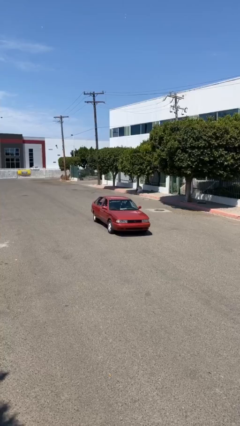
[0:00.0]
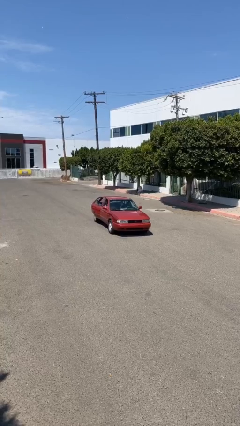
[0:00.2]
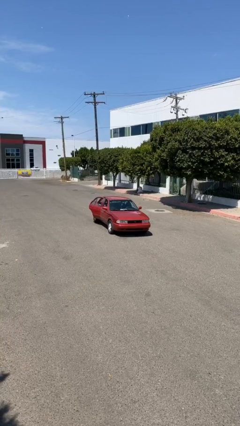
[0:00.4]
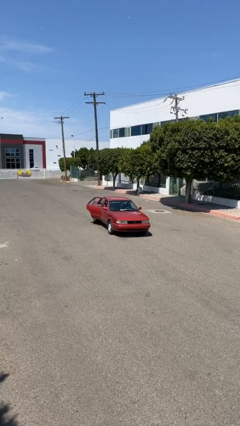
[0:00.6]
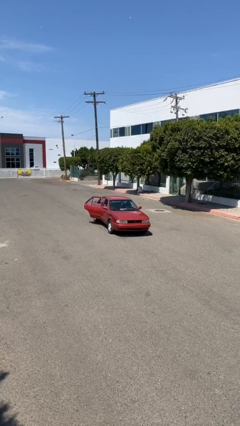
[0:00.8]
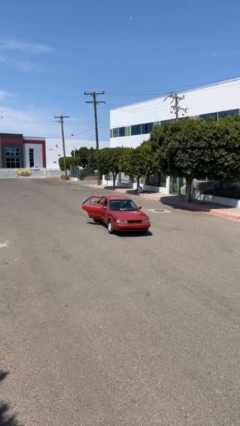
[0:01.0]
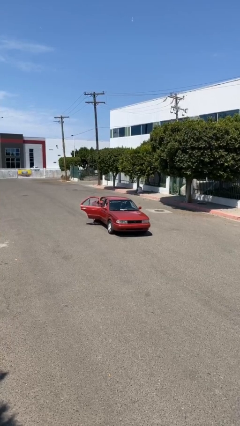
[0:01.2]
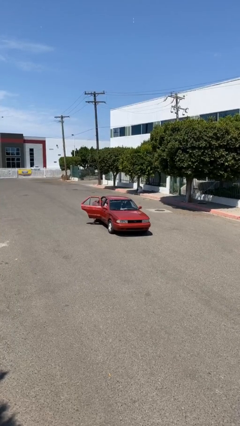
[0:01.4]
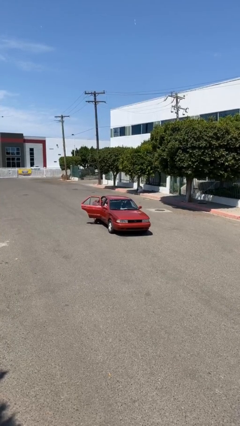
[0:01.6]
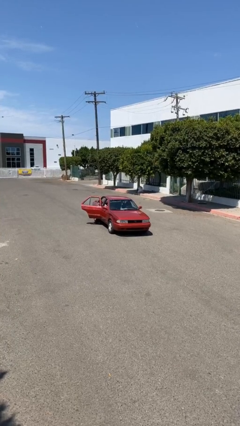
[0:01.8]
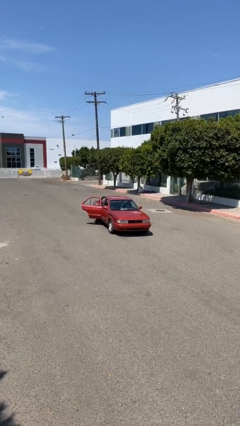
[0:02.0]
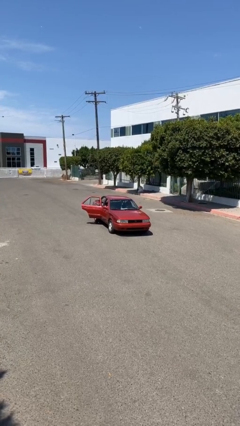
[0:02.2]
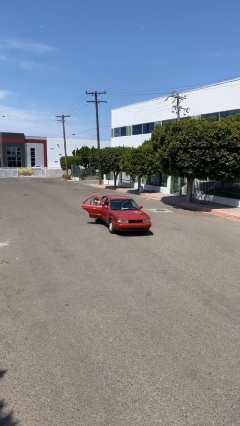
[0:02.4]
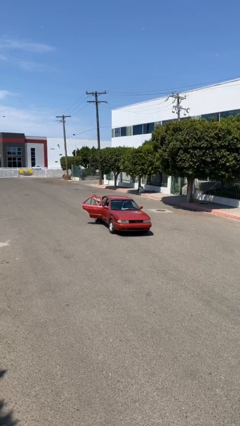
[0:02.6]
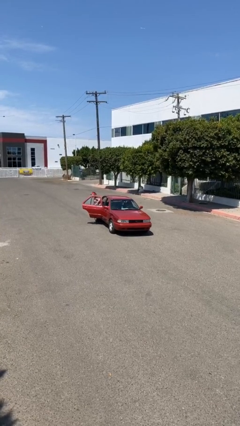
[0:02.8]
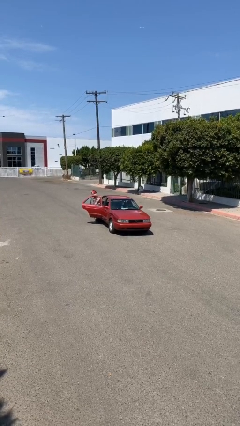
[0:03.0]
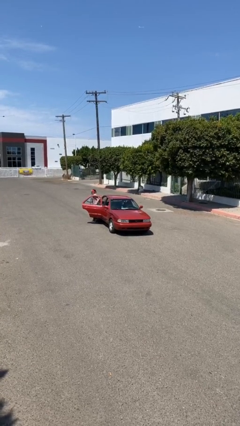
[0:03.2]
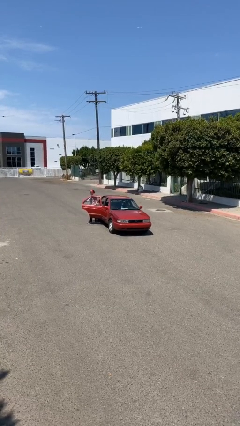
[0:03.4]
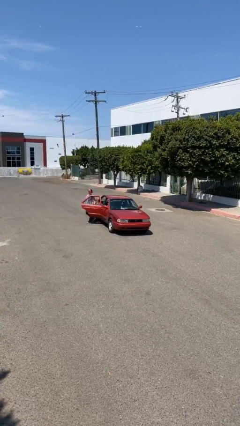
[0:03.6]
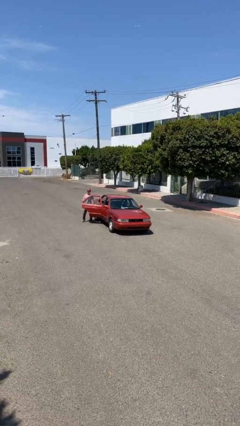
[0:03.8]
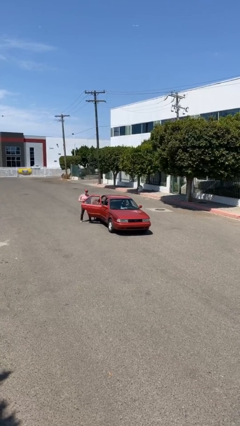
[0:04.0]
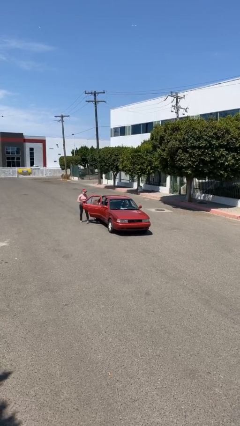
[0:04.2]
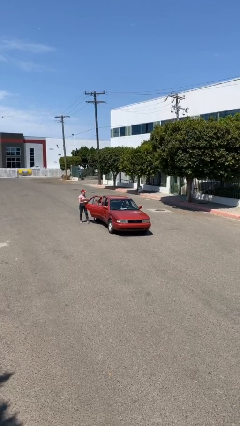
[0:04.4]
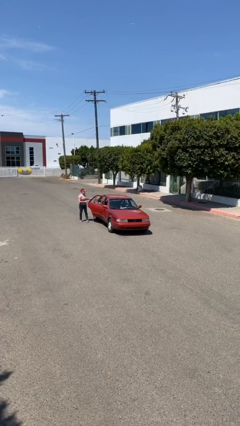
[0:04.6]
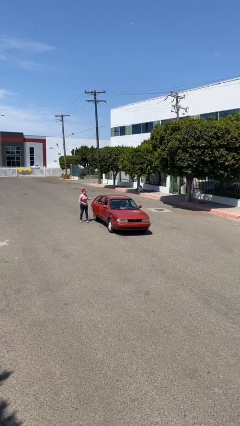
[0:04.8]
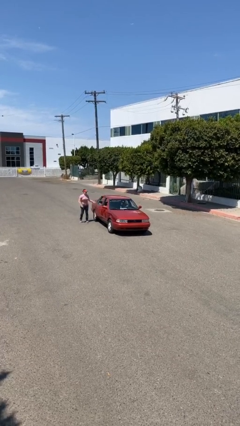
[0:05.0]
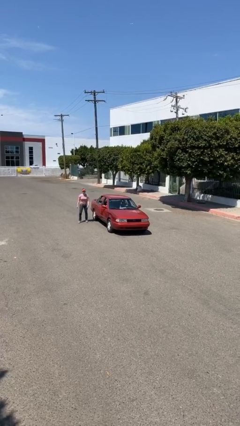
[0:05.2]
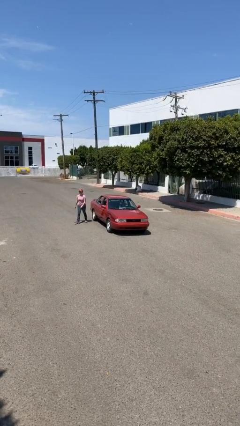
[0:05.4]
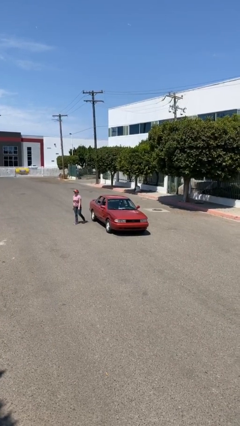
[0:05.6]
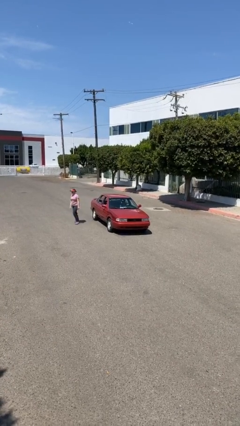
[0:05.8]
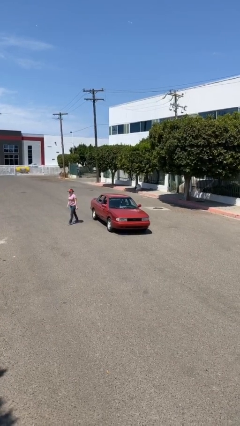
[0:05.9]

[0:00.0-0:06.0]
car drops off person

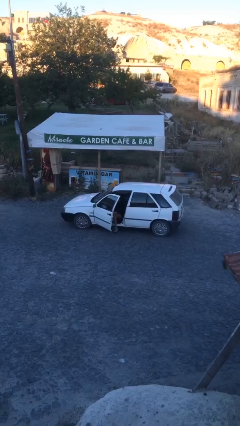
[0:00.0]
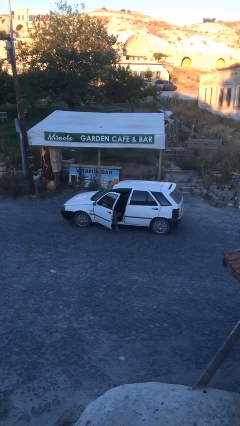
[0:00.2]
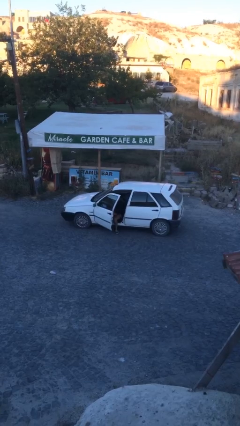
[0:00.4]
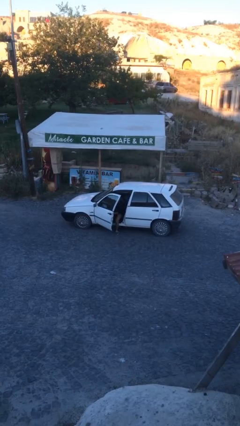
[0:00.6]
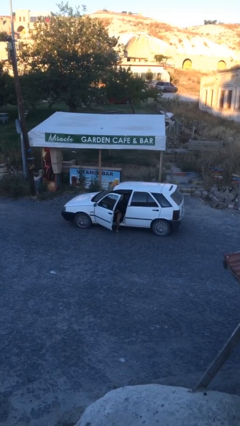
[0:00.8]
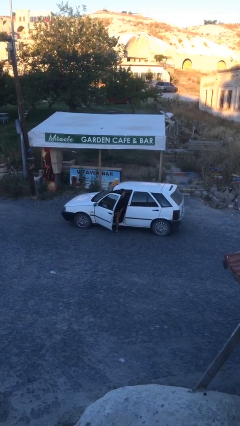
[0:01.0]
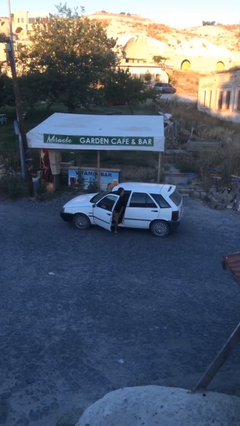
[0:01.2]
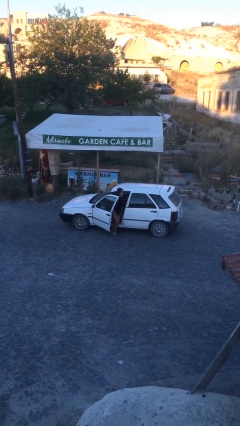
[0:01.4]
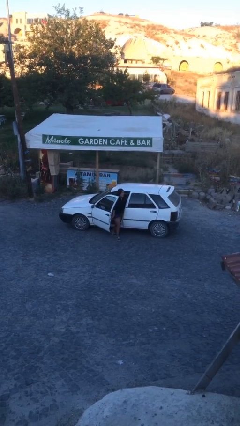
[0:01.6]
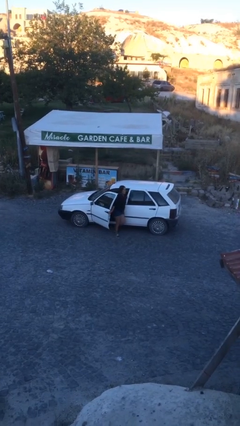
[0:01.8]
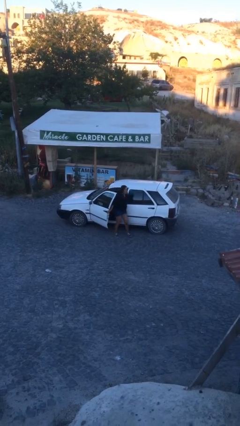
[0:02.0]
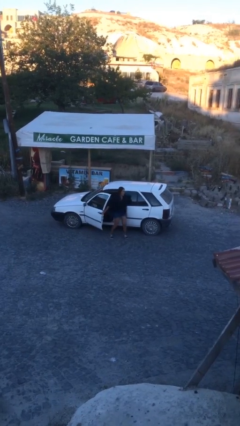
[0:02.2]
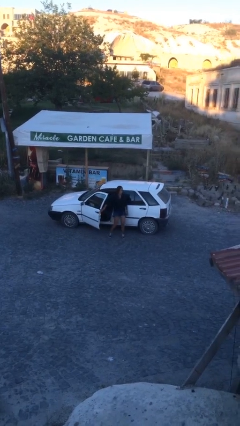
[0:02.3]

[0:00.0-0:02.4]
person exits car

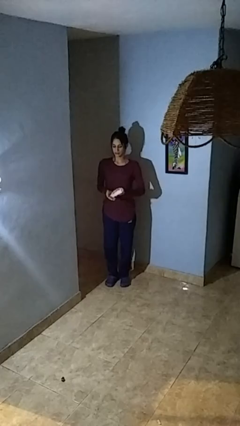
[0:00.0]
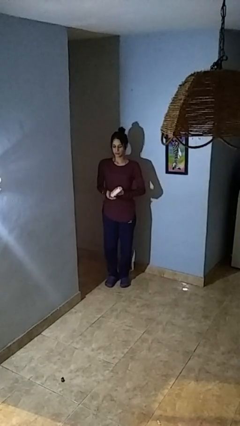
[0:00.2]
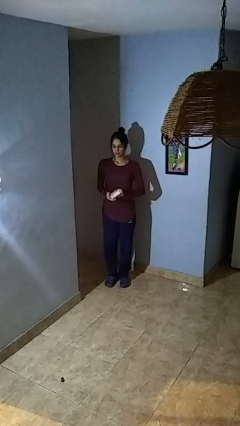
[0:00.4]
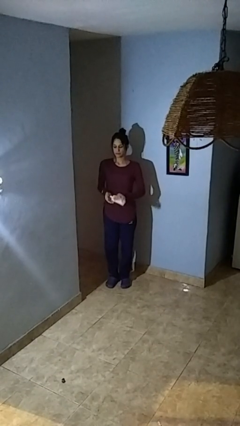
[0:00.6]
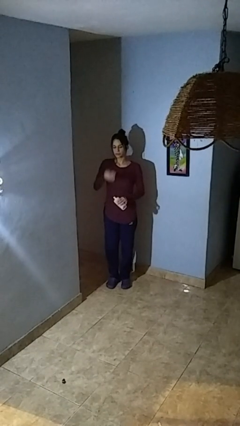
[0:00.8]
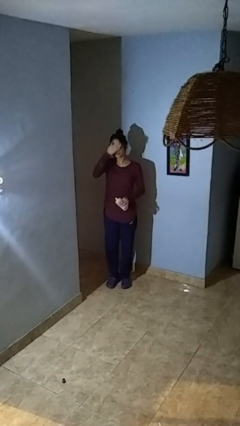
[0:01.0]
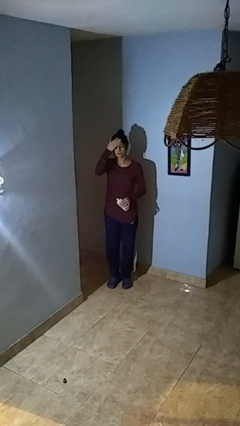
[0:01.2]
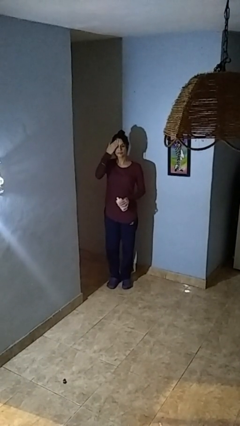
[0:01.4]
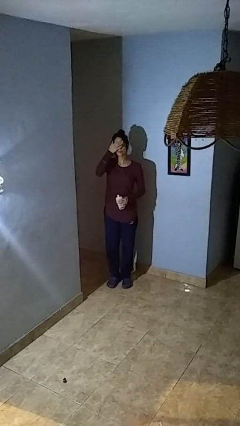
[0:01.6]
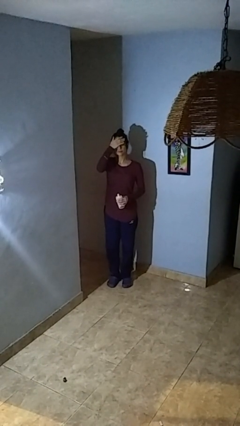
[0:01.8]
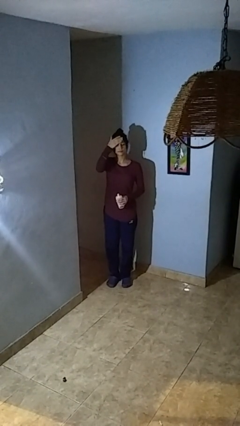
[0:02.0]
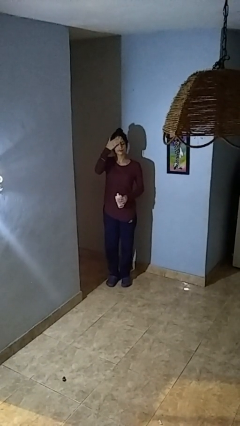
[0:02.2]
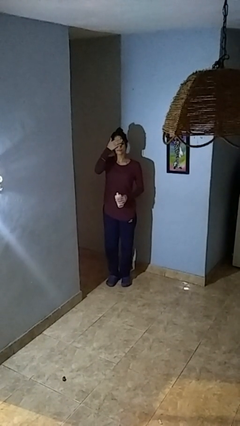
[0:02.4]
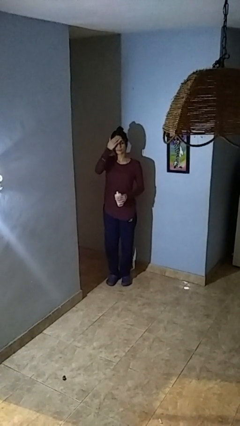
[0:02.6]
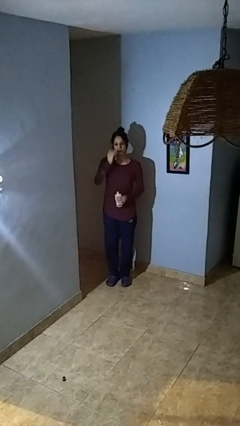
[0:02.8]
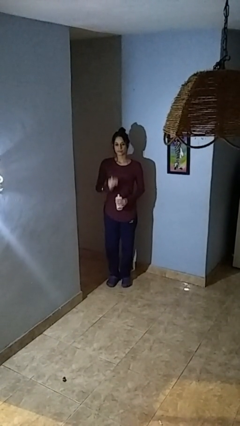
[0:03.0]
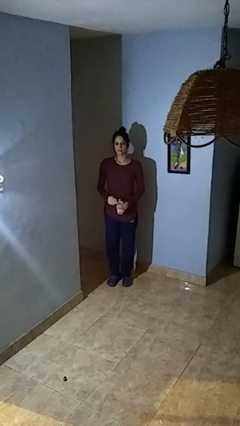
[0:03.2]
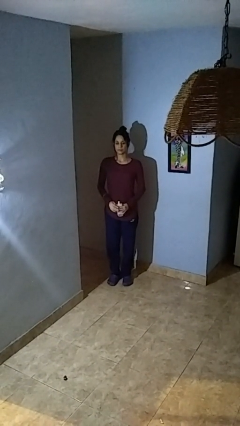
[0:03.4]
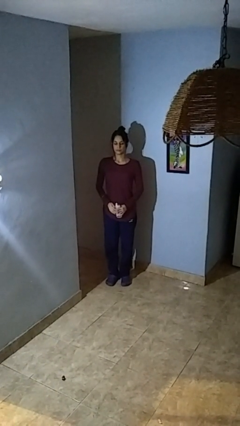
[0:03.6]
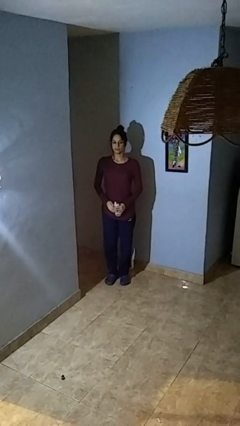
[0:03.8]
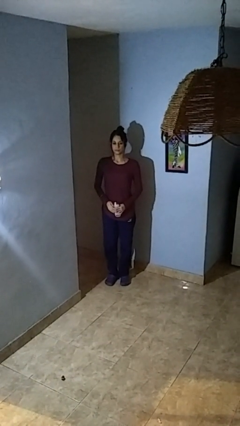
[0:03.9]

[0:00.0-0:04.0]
person applies facial moisturizer

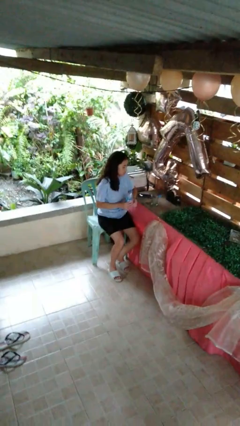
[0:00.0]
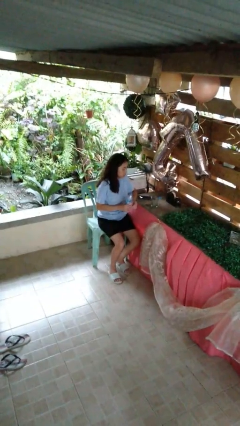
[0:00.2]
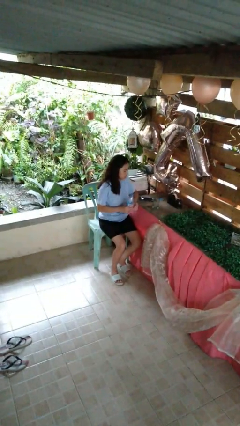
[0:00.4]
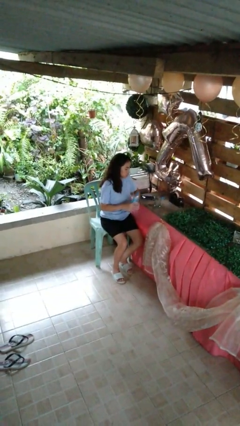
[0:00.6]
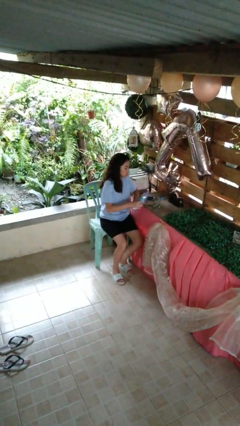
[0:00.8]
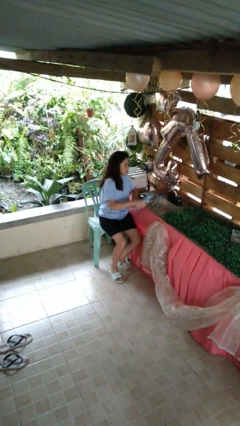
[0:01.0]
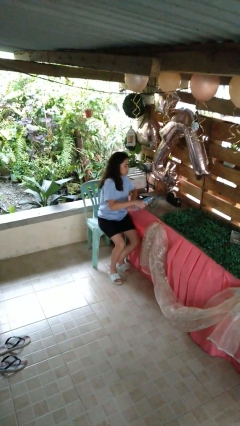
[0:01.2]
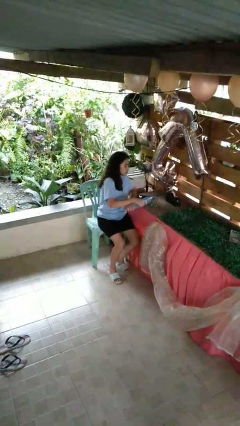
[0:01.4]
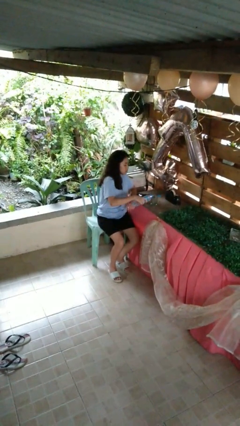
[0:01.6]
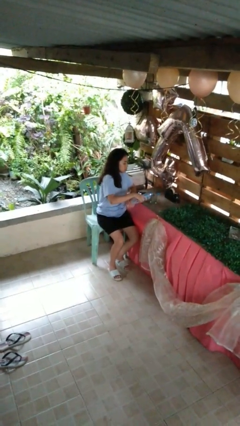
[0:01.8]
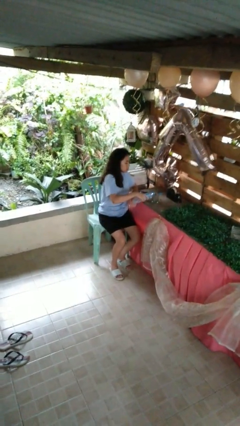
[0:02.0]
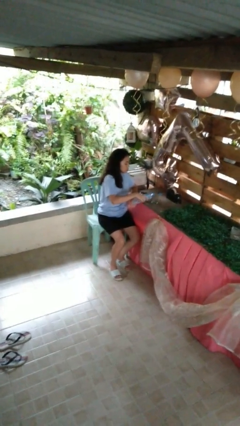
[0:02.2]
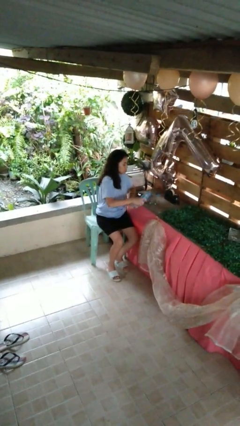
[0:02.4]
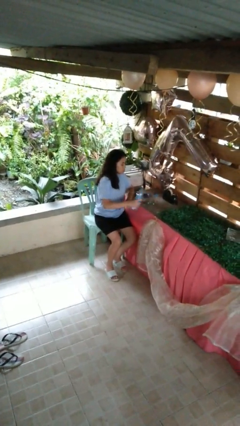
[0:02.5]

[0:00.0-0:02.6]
person pours liquid into cup

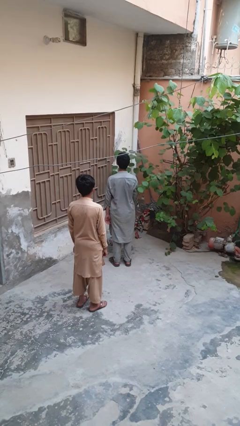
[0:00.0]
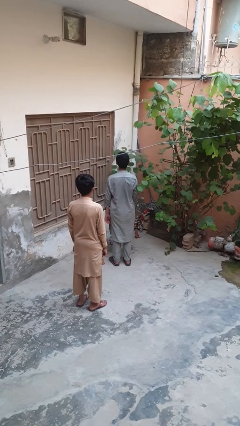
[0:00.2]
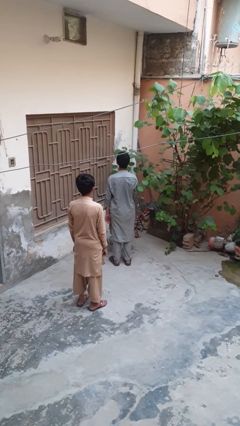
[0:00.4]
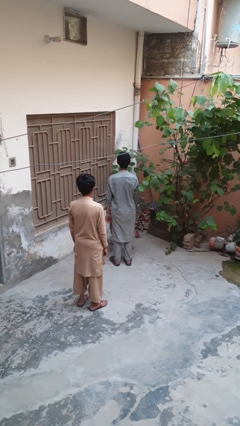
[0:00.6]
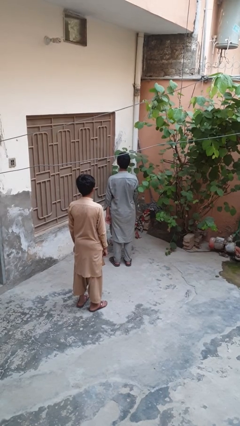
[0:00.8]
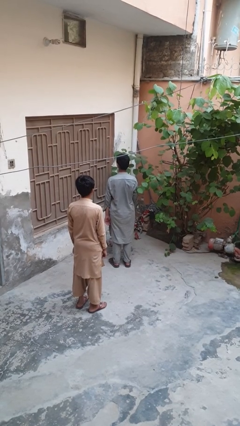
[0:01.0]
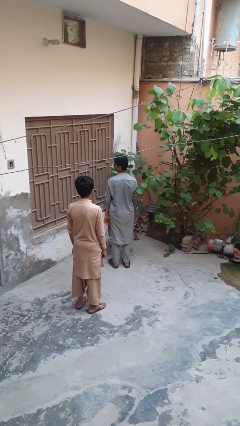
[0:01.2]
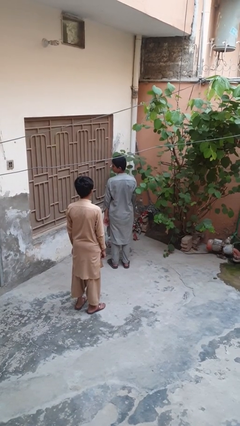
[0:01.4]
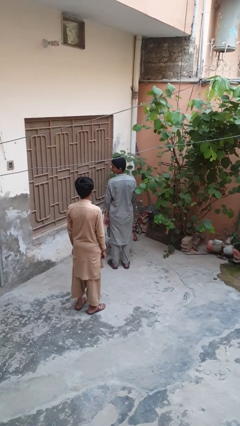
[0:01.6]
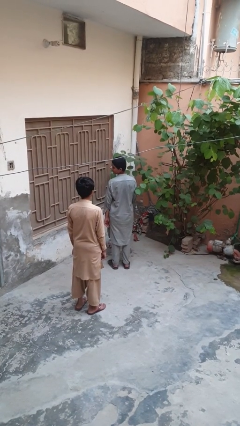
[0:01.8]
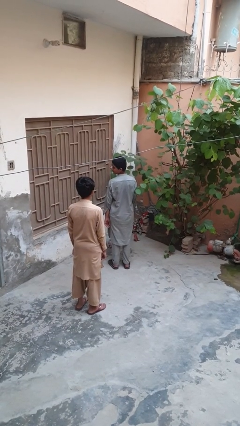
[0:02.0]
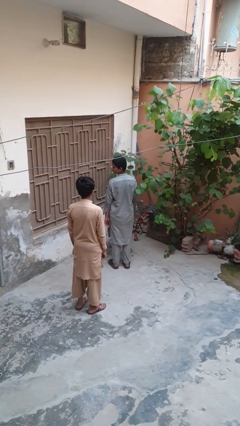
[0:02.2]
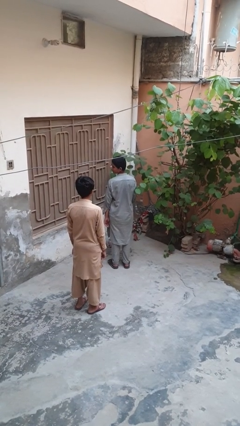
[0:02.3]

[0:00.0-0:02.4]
person looks over shoulder

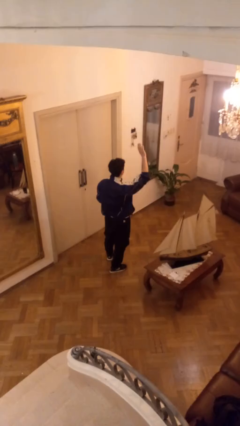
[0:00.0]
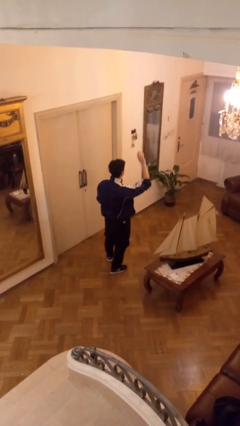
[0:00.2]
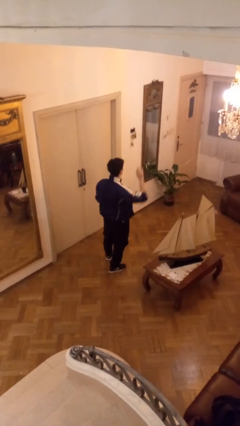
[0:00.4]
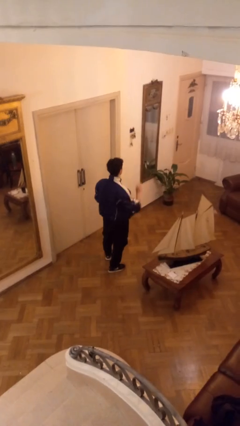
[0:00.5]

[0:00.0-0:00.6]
person gestures lower hand
